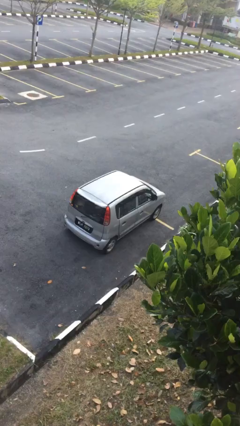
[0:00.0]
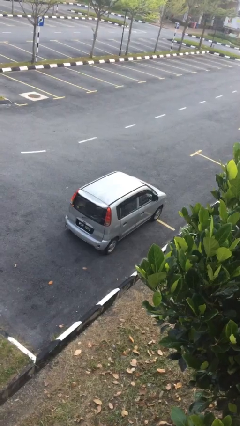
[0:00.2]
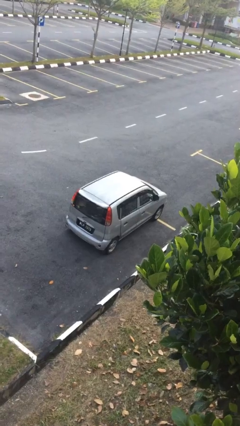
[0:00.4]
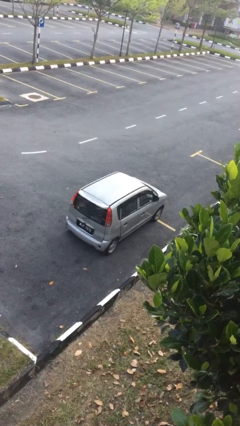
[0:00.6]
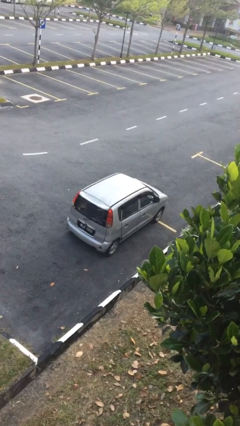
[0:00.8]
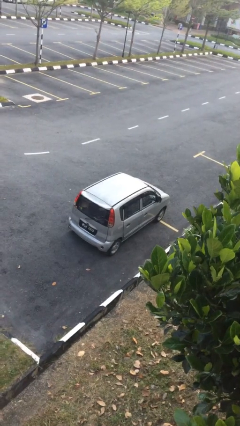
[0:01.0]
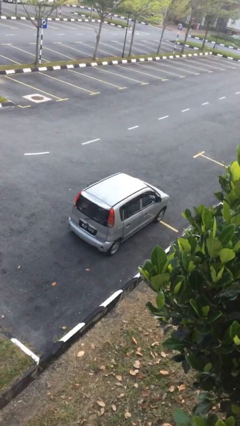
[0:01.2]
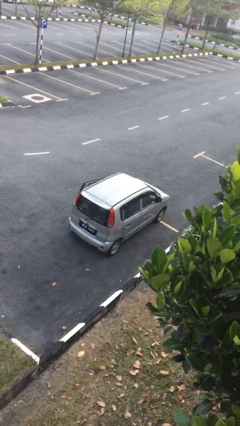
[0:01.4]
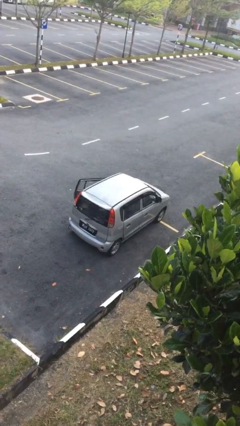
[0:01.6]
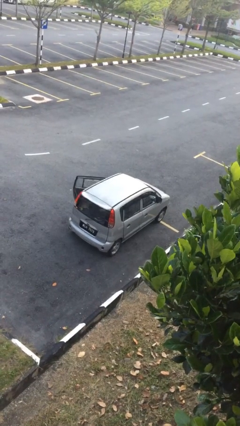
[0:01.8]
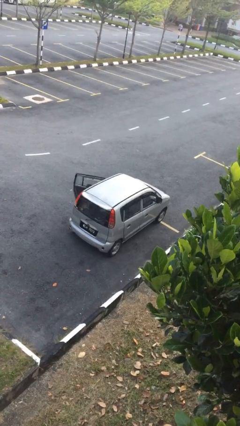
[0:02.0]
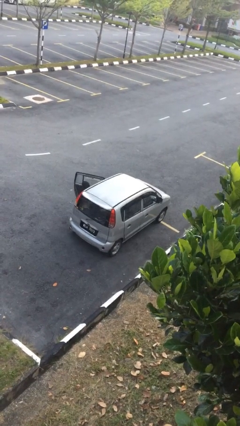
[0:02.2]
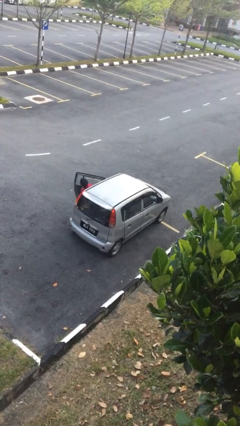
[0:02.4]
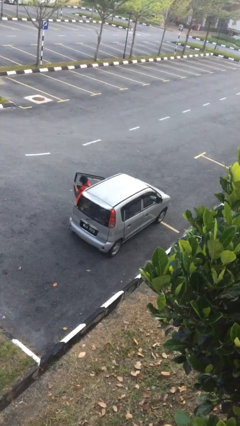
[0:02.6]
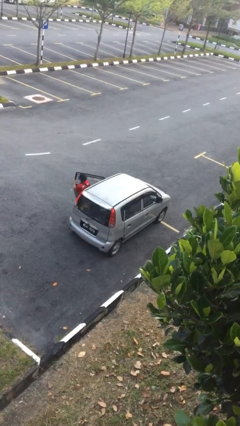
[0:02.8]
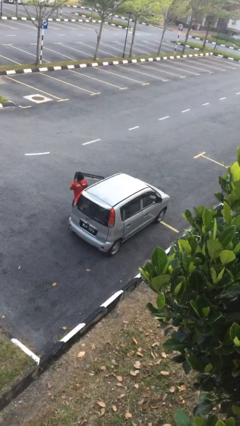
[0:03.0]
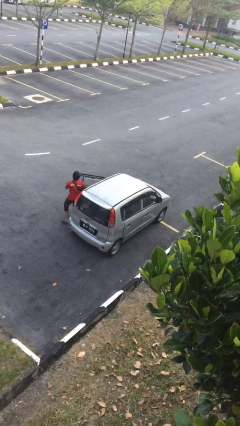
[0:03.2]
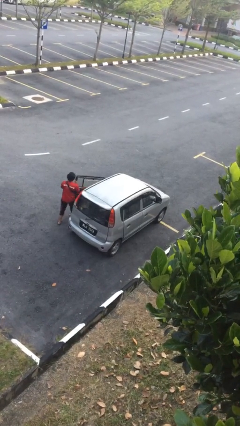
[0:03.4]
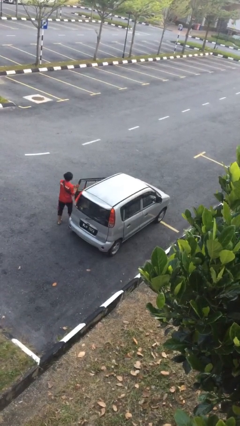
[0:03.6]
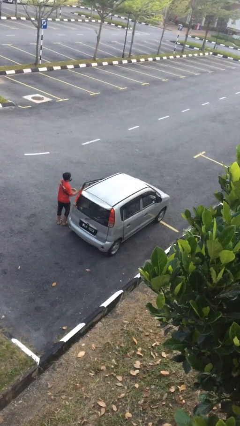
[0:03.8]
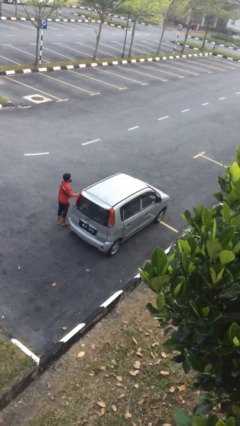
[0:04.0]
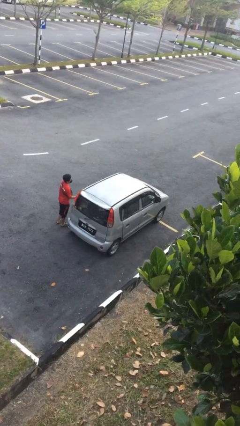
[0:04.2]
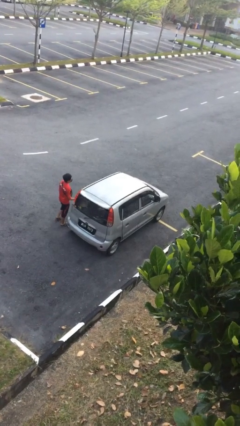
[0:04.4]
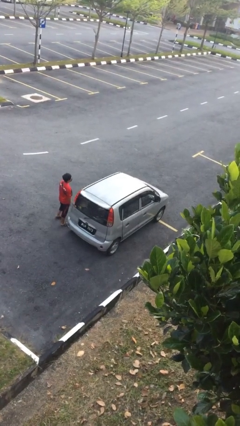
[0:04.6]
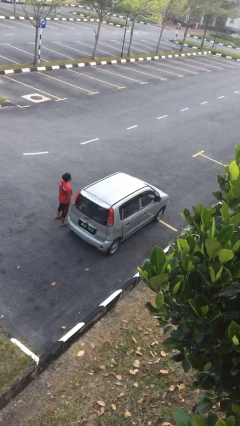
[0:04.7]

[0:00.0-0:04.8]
car drops off person

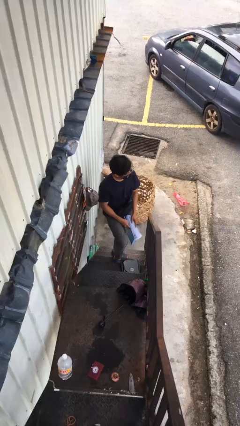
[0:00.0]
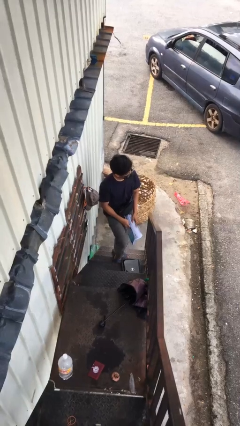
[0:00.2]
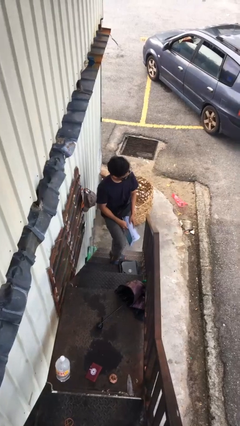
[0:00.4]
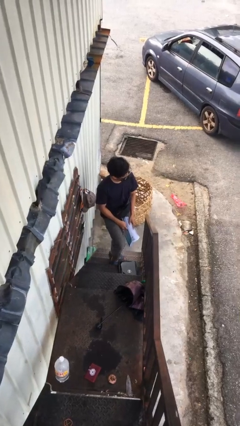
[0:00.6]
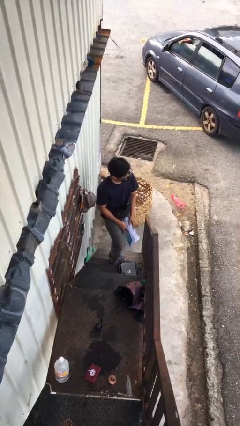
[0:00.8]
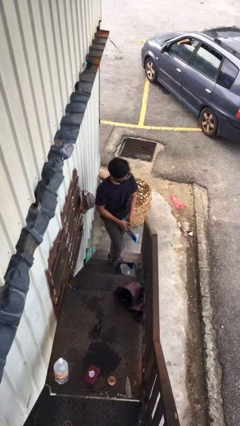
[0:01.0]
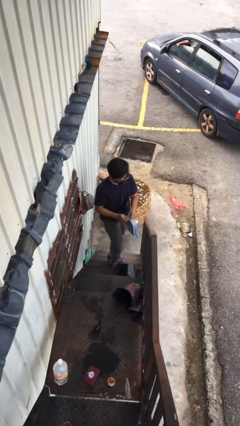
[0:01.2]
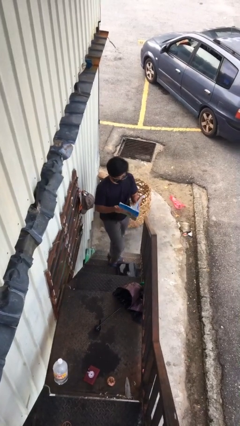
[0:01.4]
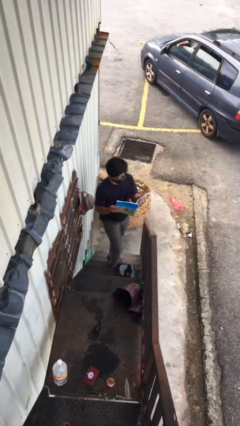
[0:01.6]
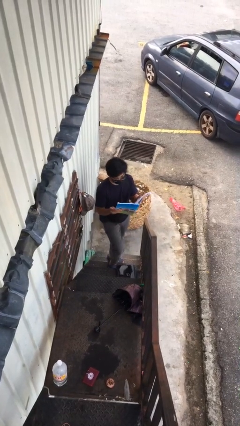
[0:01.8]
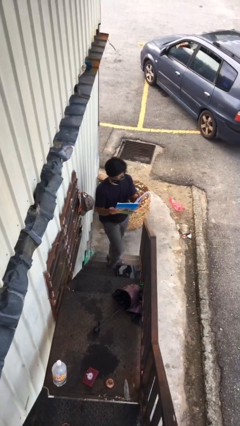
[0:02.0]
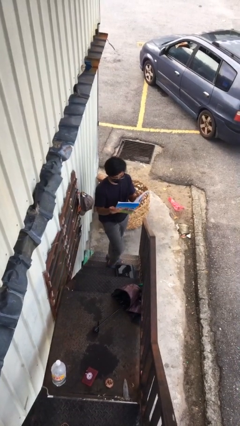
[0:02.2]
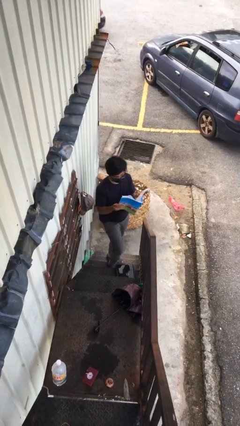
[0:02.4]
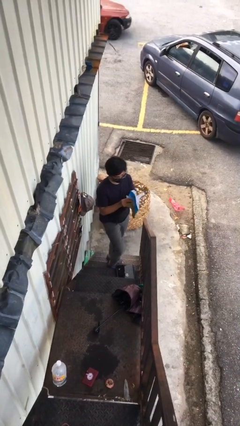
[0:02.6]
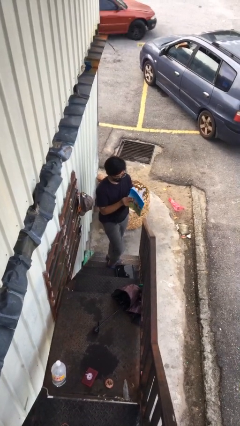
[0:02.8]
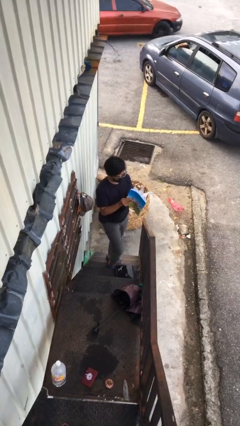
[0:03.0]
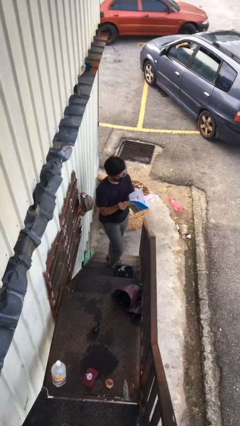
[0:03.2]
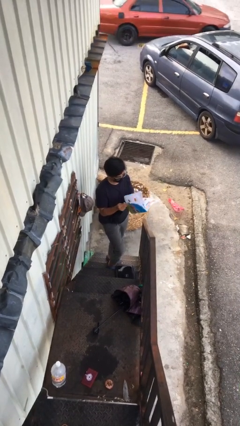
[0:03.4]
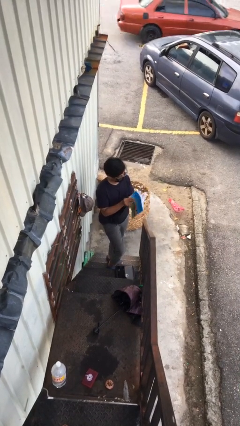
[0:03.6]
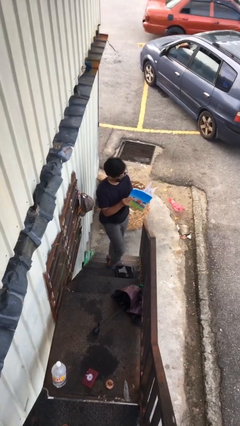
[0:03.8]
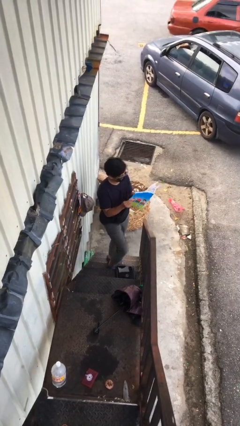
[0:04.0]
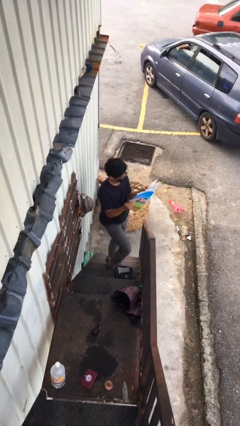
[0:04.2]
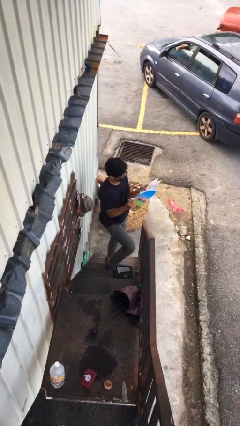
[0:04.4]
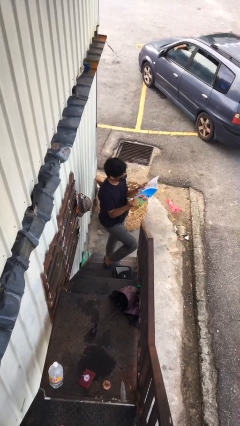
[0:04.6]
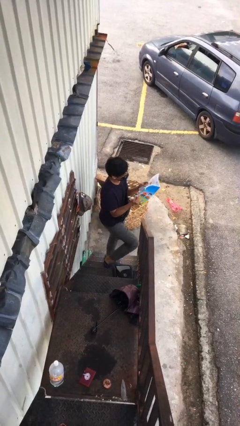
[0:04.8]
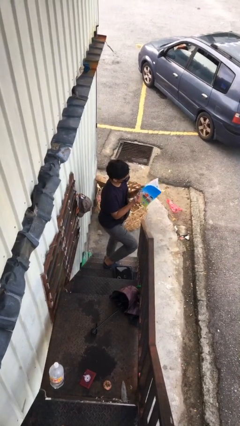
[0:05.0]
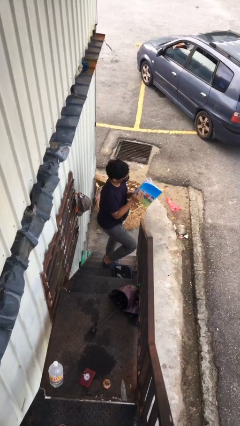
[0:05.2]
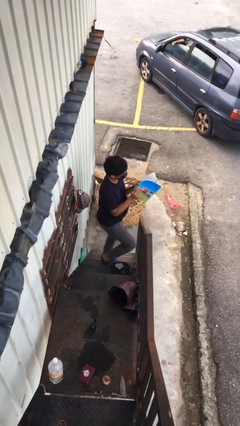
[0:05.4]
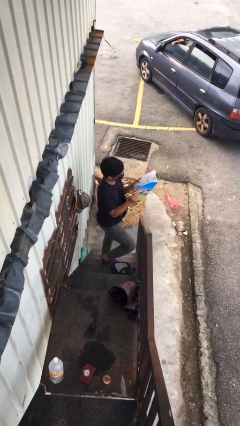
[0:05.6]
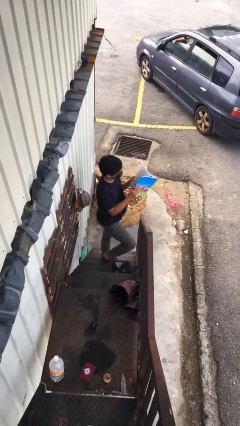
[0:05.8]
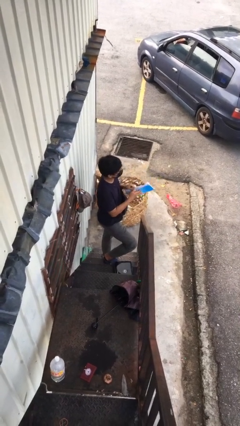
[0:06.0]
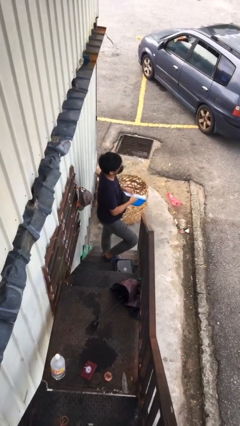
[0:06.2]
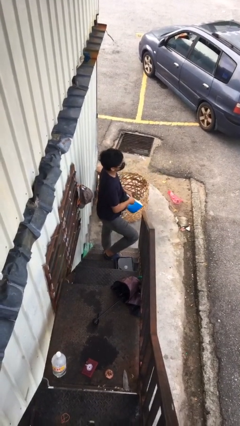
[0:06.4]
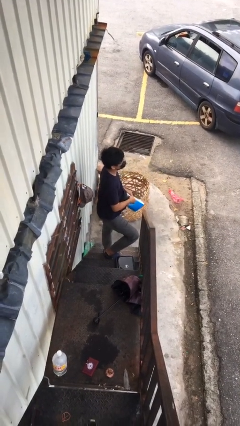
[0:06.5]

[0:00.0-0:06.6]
person reads document

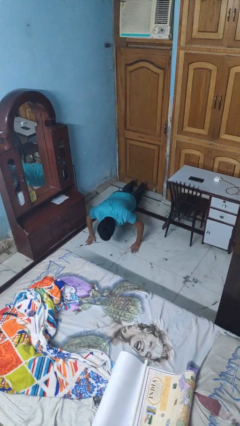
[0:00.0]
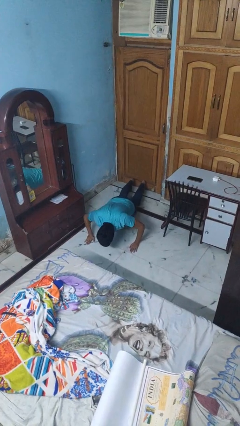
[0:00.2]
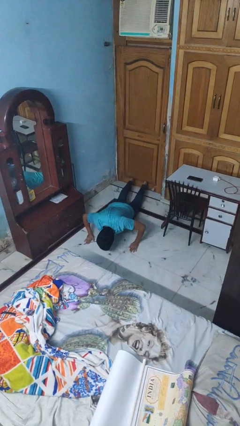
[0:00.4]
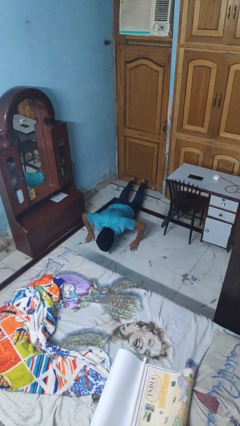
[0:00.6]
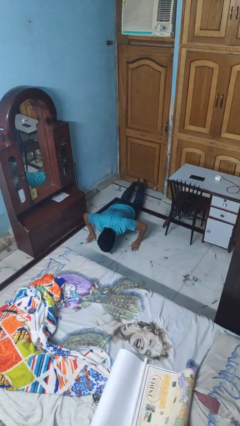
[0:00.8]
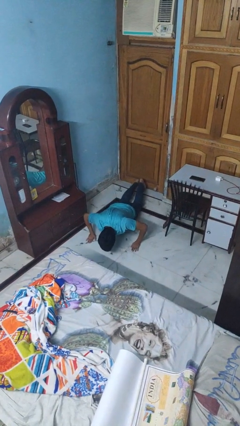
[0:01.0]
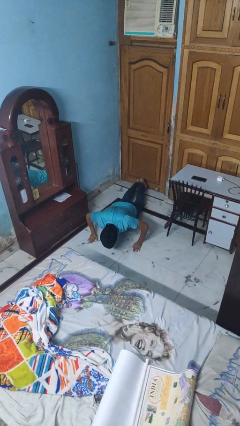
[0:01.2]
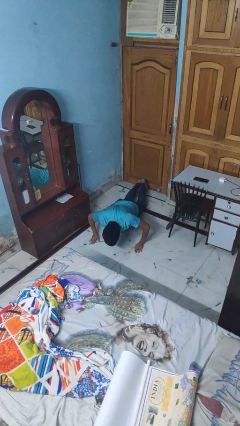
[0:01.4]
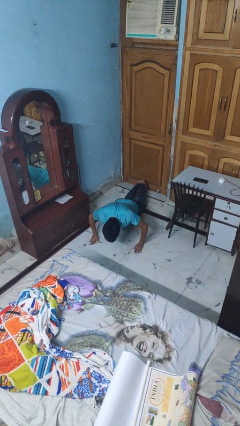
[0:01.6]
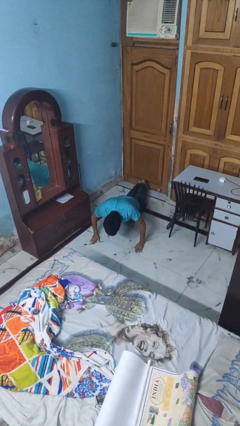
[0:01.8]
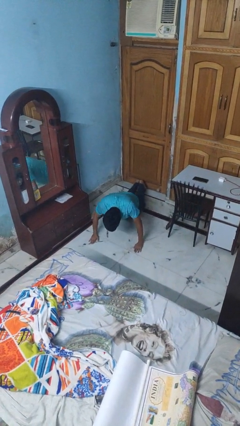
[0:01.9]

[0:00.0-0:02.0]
person exercises with pushup

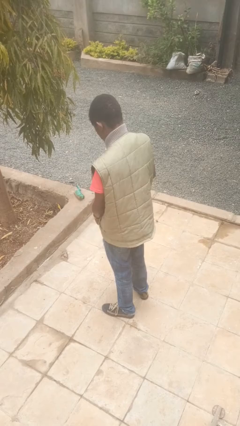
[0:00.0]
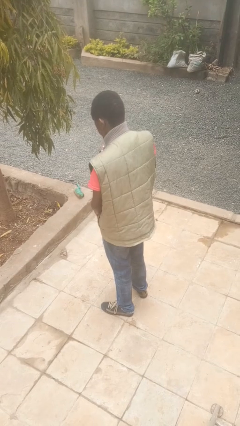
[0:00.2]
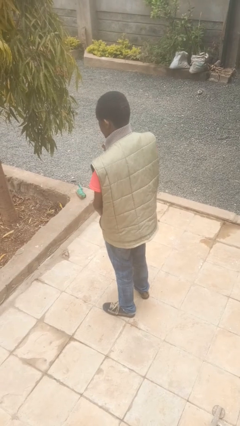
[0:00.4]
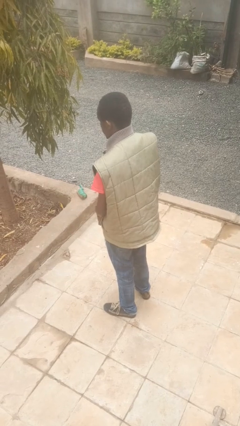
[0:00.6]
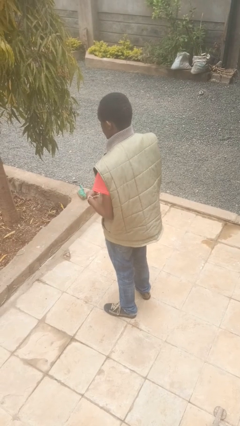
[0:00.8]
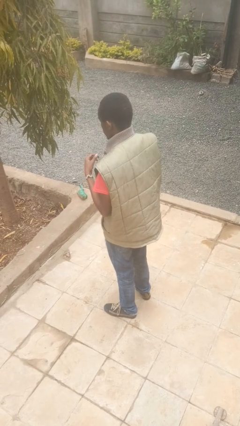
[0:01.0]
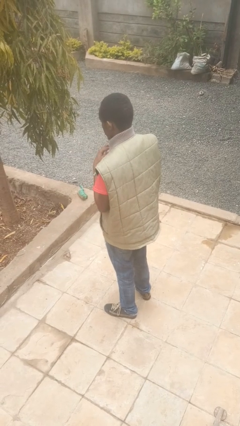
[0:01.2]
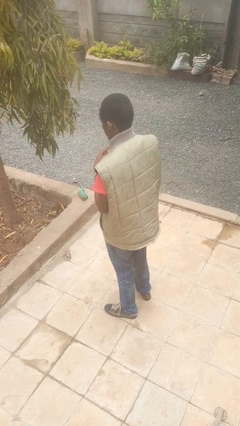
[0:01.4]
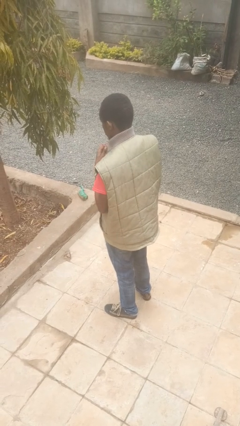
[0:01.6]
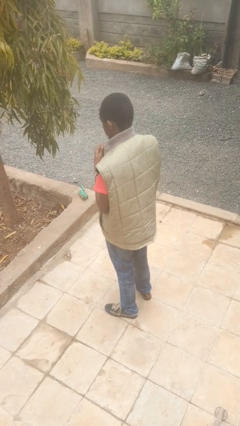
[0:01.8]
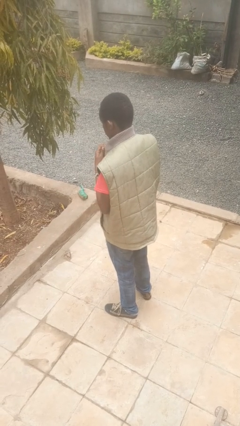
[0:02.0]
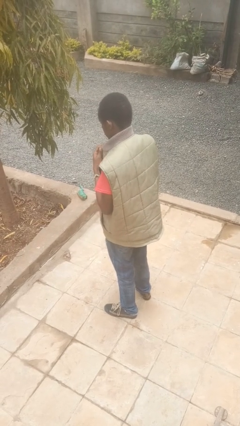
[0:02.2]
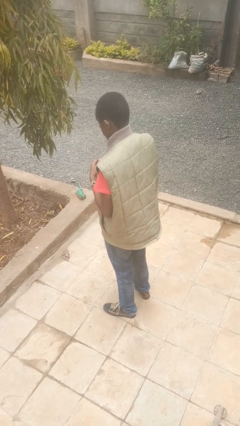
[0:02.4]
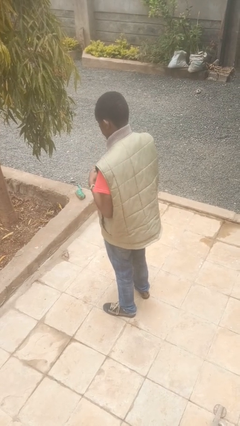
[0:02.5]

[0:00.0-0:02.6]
person unzips jacket

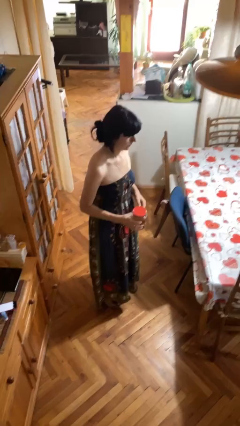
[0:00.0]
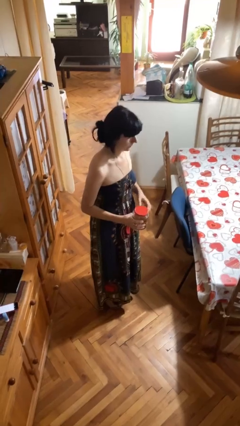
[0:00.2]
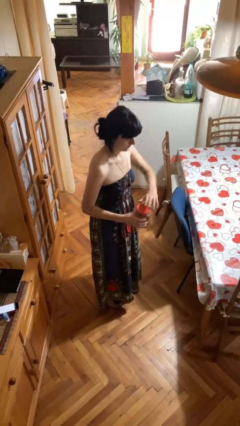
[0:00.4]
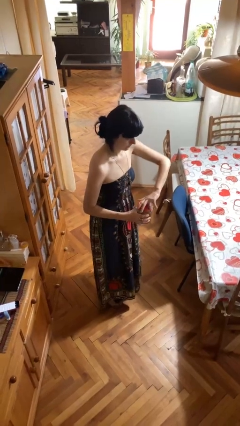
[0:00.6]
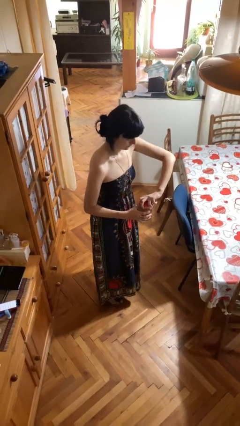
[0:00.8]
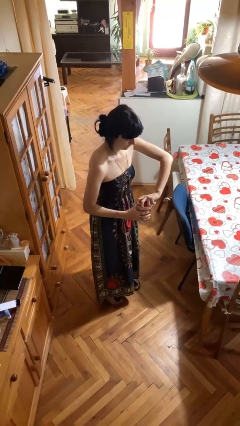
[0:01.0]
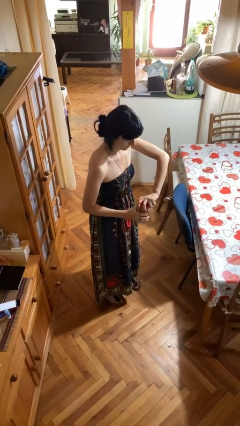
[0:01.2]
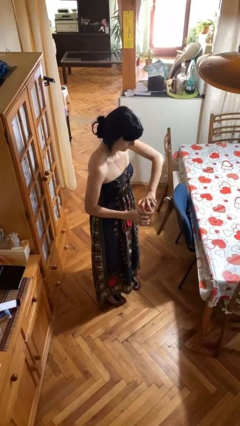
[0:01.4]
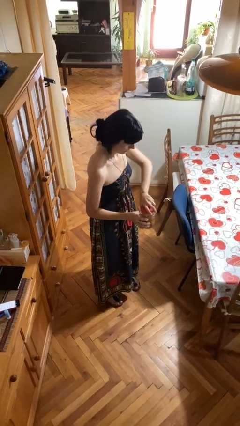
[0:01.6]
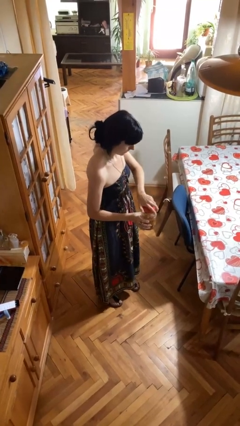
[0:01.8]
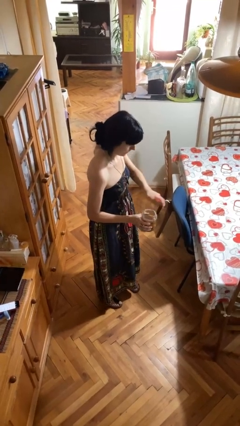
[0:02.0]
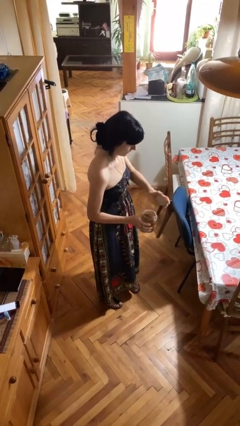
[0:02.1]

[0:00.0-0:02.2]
person opens jar
